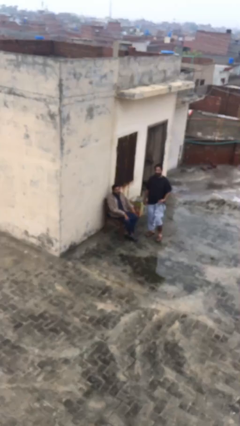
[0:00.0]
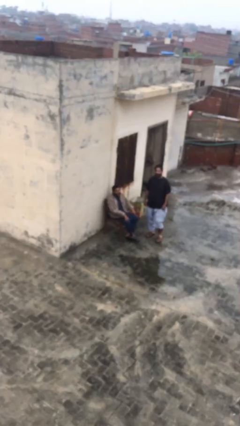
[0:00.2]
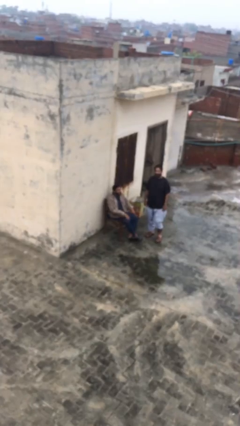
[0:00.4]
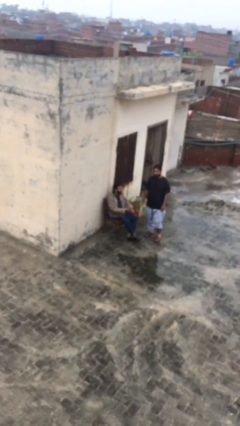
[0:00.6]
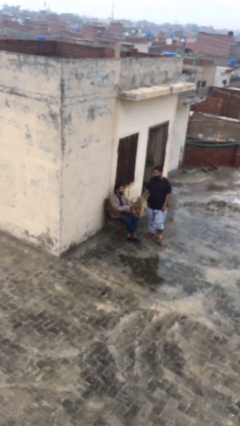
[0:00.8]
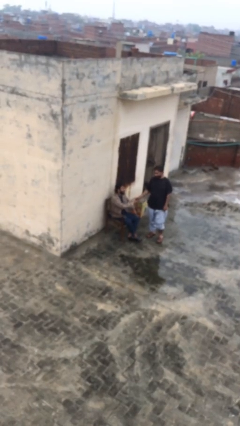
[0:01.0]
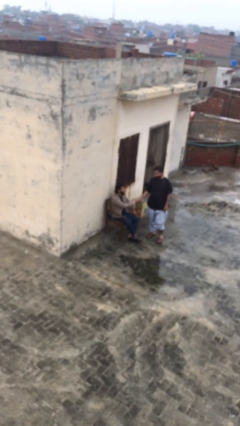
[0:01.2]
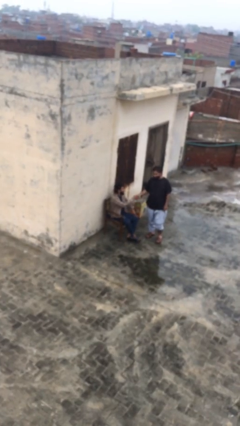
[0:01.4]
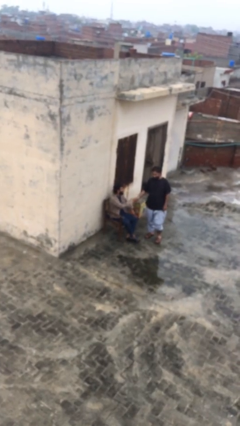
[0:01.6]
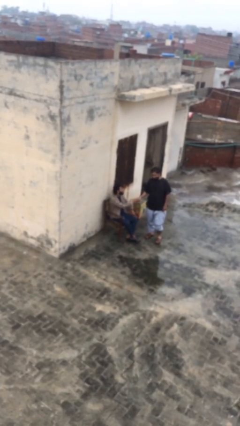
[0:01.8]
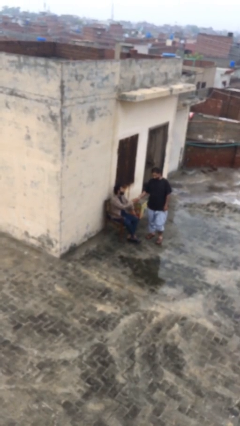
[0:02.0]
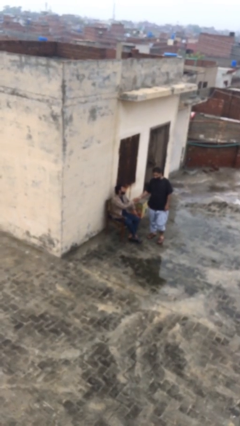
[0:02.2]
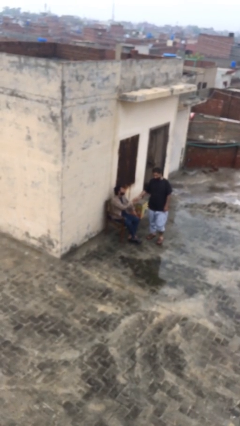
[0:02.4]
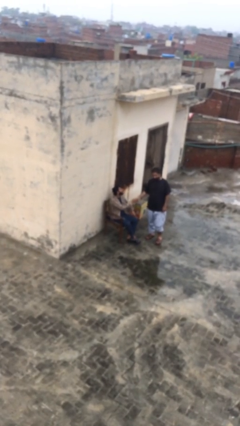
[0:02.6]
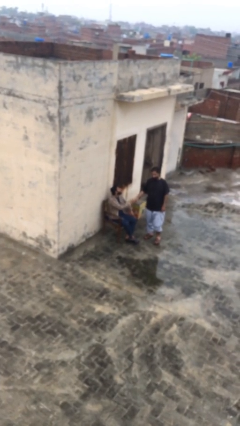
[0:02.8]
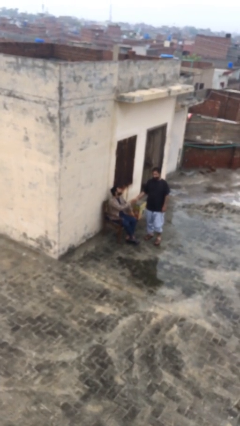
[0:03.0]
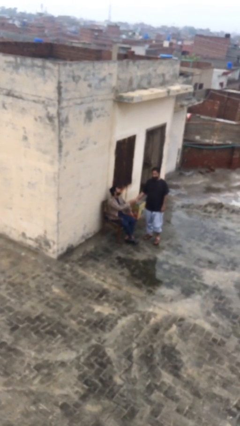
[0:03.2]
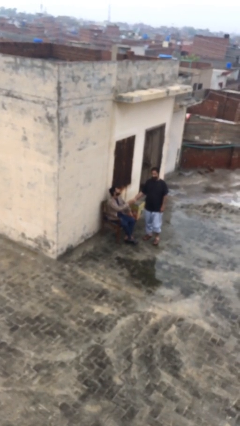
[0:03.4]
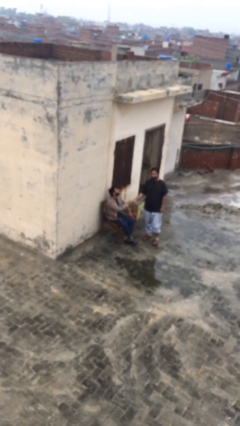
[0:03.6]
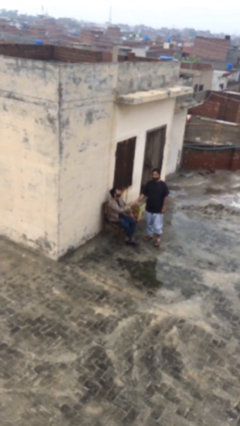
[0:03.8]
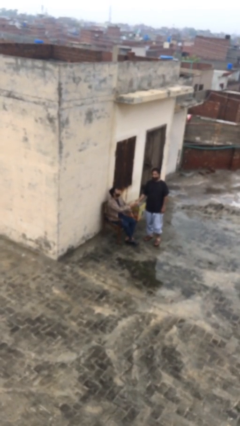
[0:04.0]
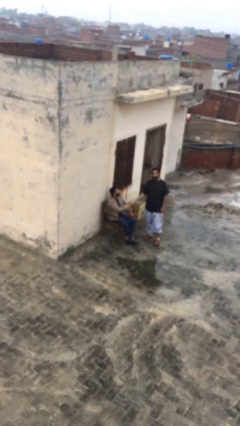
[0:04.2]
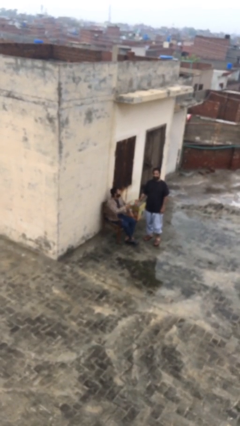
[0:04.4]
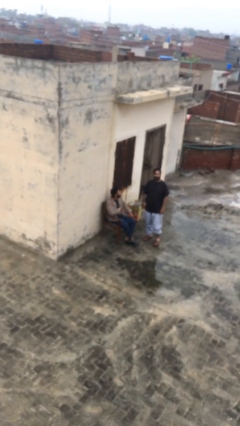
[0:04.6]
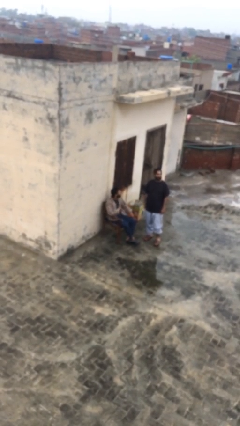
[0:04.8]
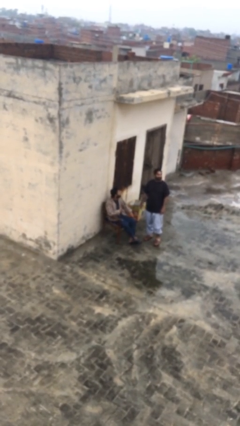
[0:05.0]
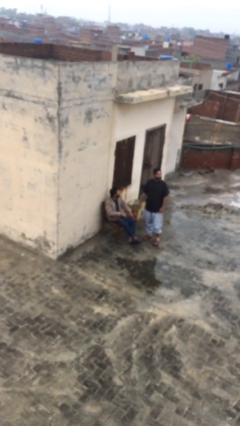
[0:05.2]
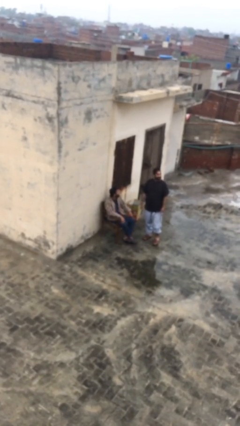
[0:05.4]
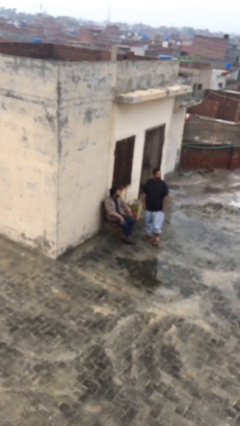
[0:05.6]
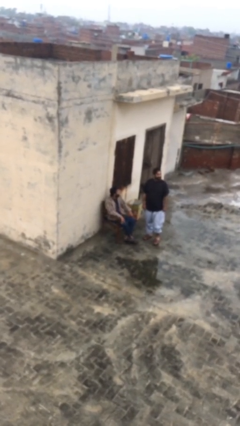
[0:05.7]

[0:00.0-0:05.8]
person shakes hand

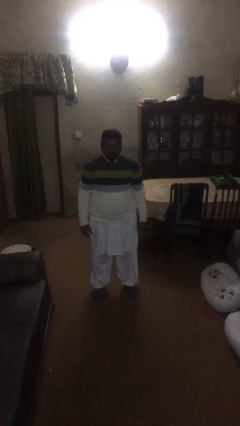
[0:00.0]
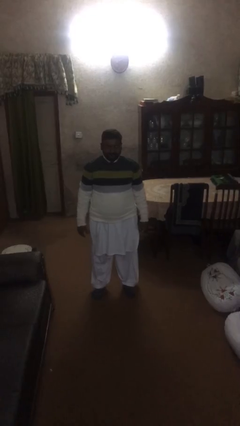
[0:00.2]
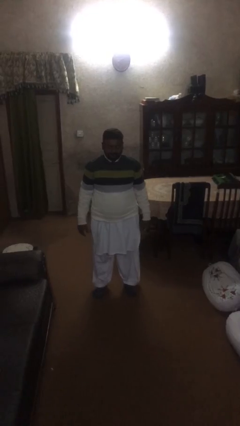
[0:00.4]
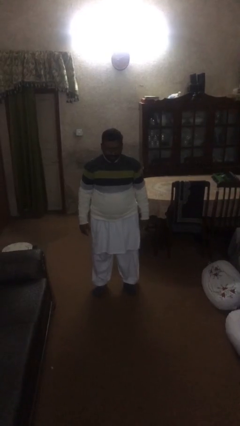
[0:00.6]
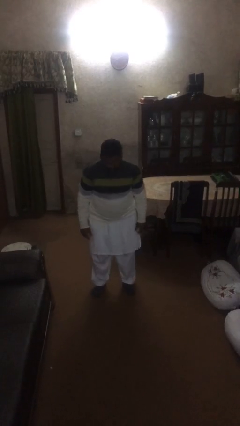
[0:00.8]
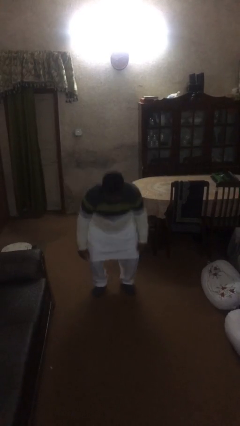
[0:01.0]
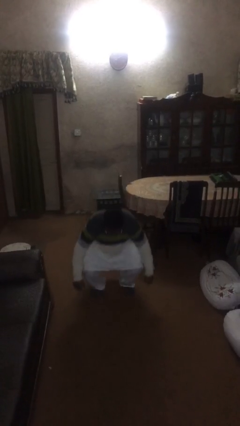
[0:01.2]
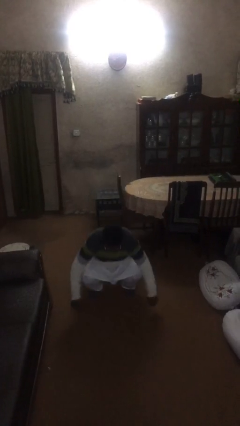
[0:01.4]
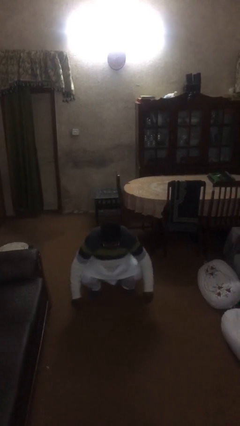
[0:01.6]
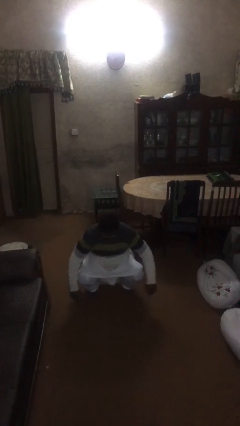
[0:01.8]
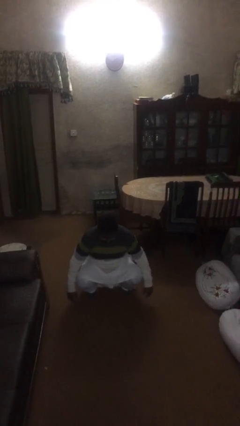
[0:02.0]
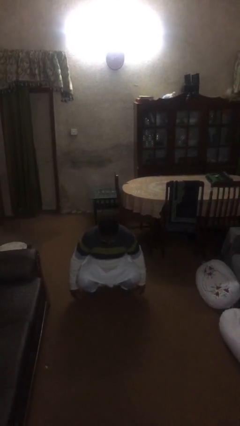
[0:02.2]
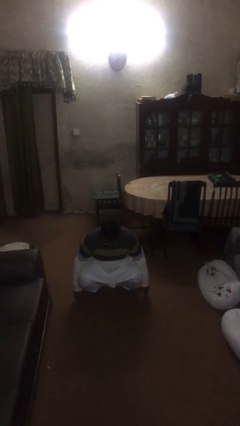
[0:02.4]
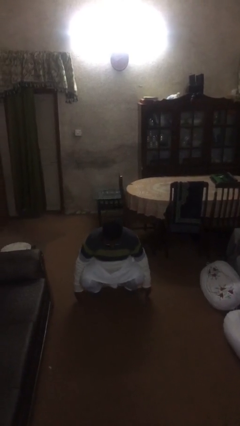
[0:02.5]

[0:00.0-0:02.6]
person sits down

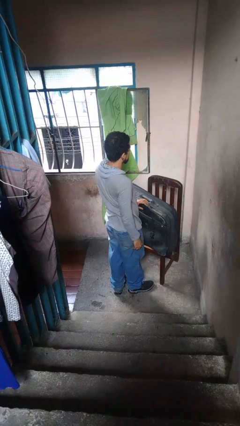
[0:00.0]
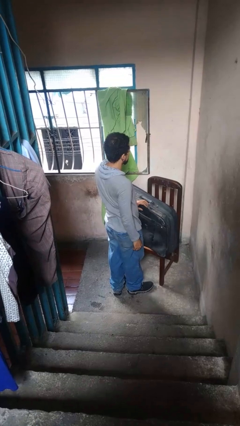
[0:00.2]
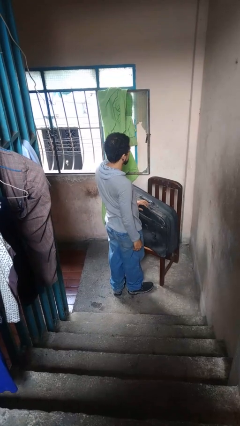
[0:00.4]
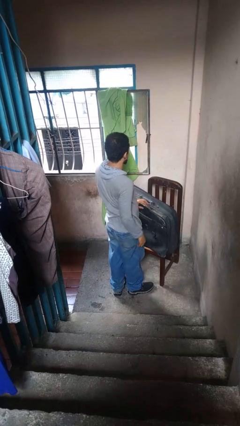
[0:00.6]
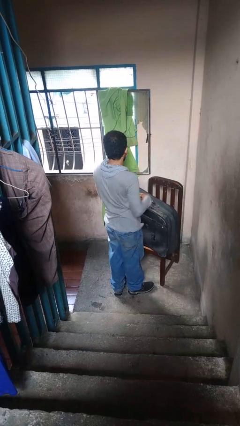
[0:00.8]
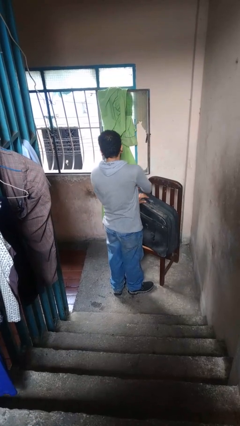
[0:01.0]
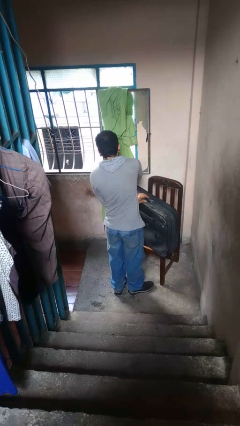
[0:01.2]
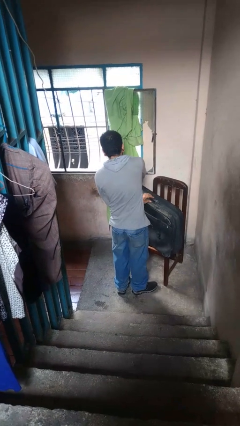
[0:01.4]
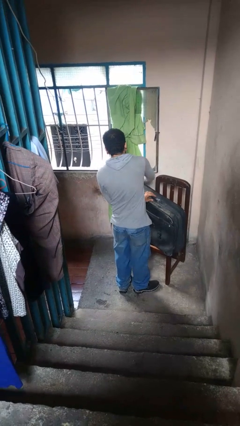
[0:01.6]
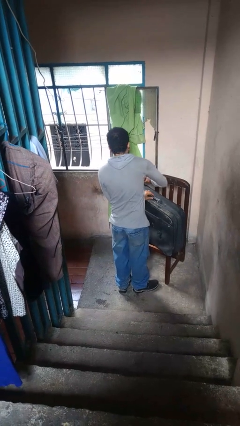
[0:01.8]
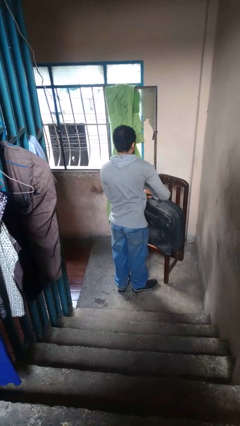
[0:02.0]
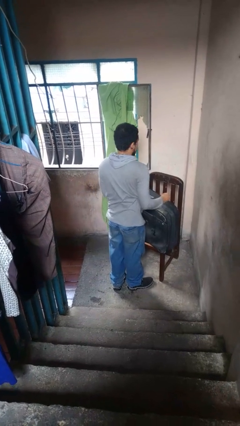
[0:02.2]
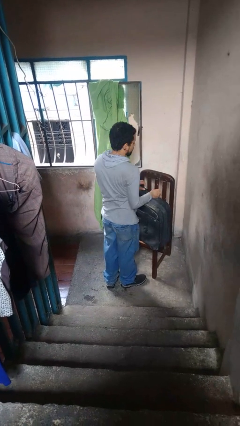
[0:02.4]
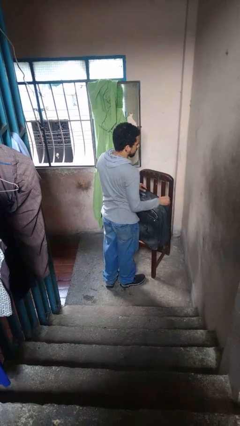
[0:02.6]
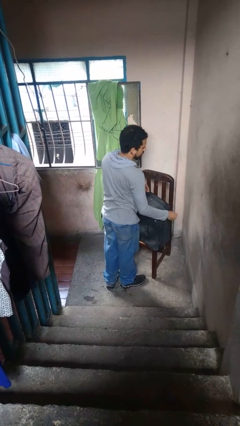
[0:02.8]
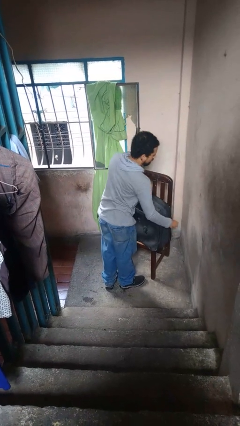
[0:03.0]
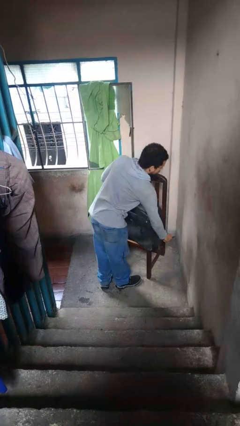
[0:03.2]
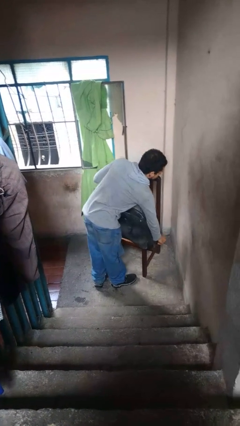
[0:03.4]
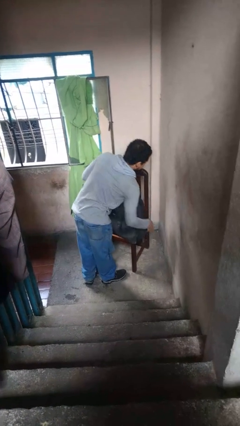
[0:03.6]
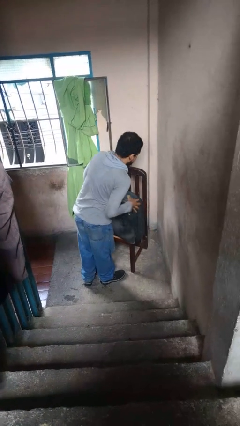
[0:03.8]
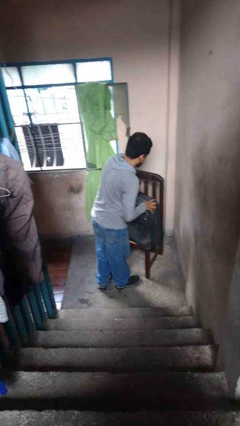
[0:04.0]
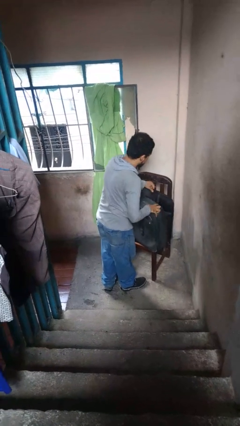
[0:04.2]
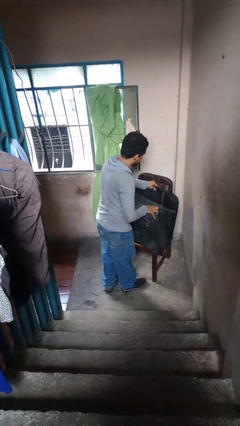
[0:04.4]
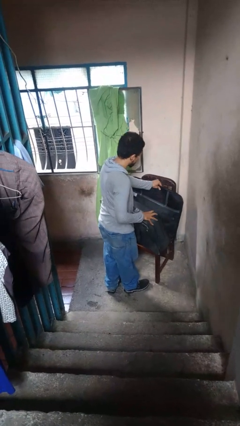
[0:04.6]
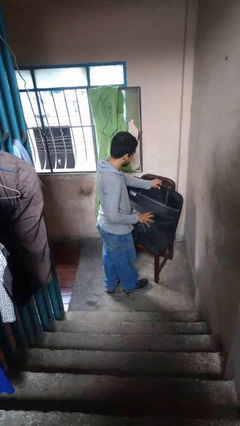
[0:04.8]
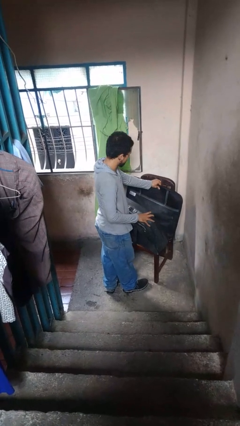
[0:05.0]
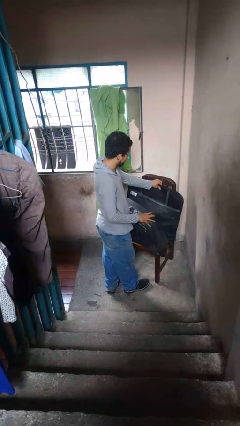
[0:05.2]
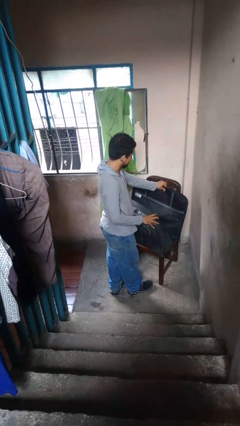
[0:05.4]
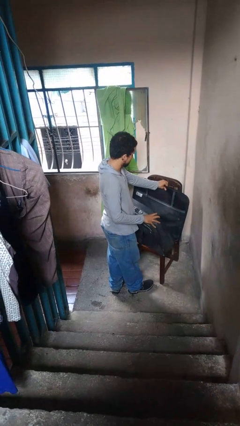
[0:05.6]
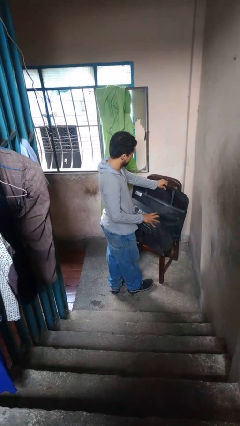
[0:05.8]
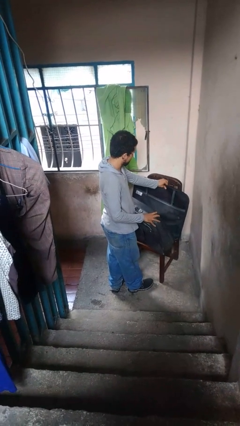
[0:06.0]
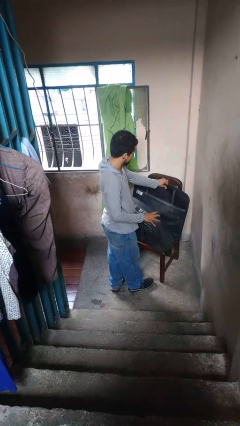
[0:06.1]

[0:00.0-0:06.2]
person opens suitcase

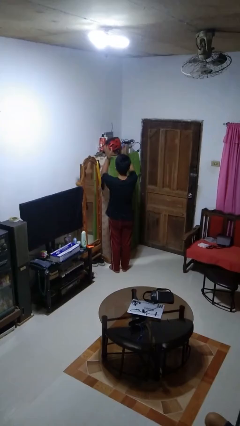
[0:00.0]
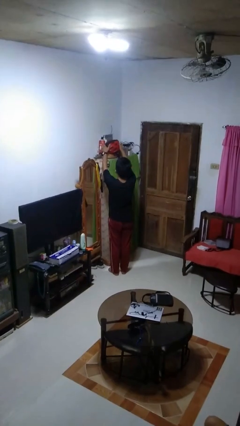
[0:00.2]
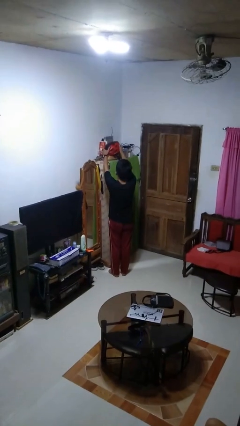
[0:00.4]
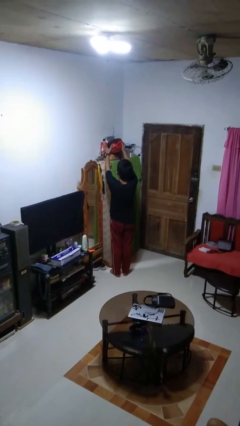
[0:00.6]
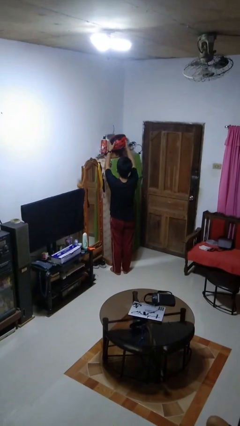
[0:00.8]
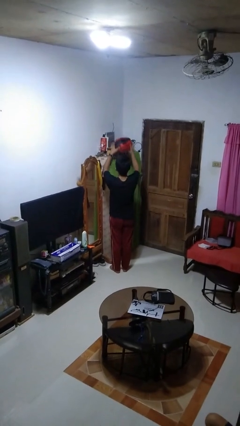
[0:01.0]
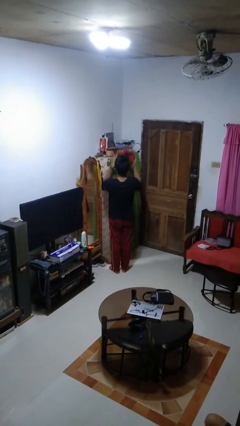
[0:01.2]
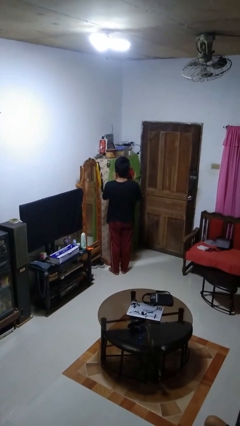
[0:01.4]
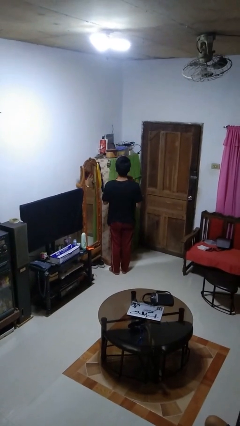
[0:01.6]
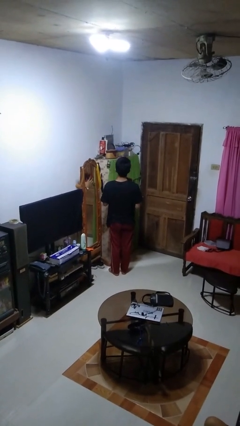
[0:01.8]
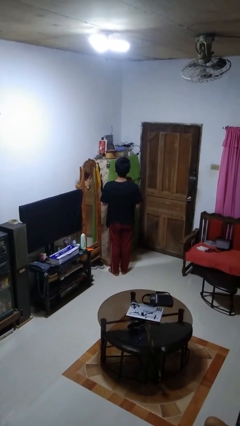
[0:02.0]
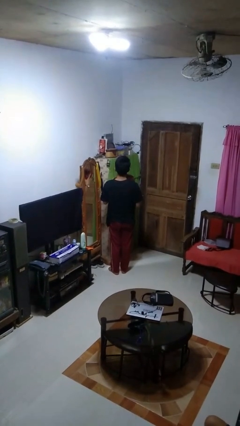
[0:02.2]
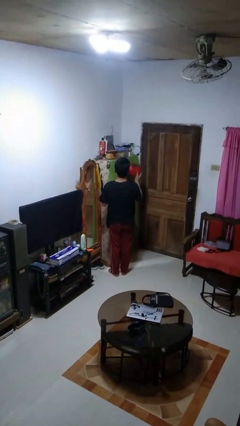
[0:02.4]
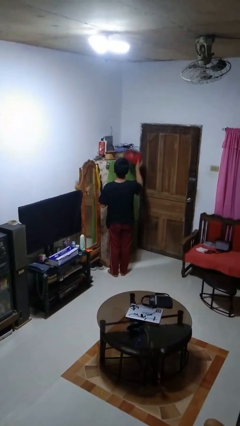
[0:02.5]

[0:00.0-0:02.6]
person picks up object from shelf

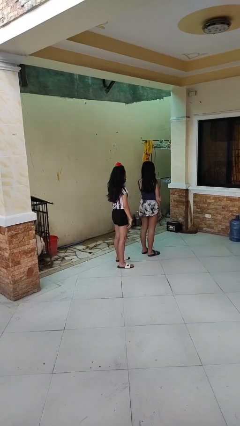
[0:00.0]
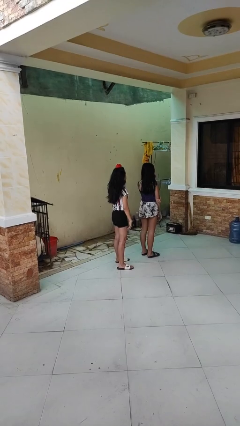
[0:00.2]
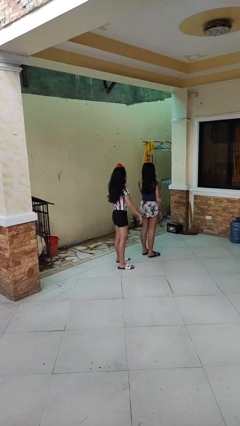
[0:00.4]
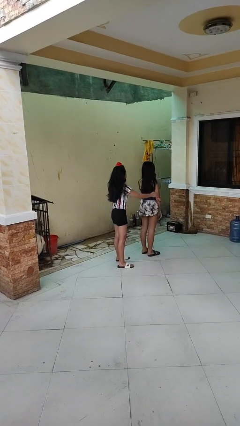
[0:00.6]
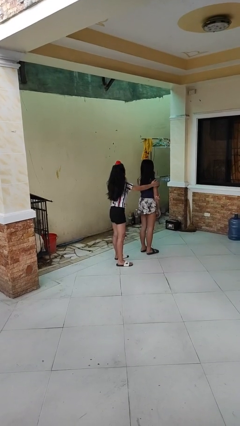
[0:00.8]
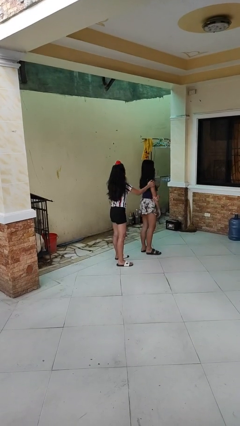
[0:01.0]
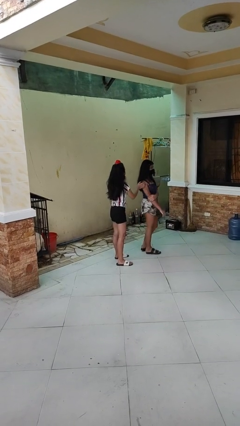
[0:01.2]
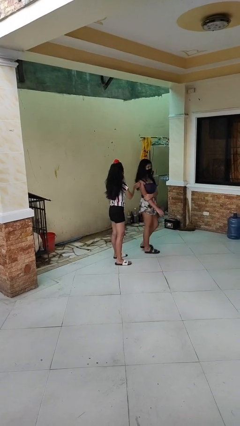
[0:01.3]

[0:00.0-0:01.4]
person grabs person by shoulder
